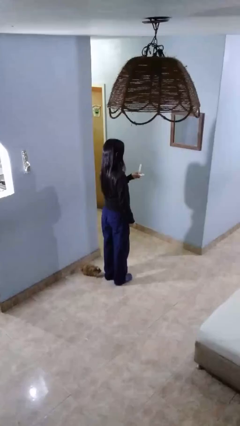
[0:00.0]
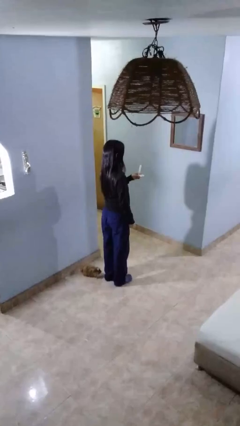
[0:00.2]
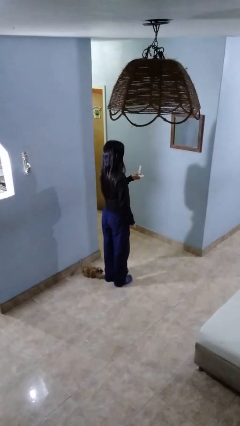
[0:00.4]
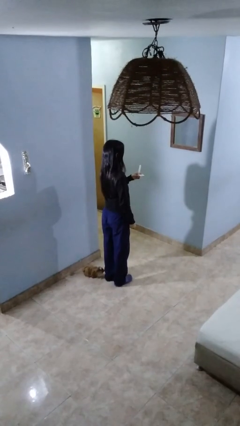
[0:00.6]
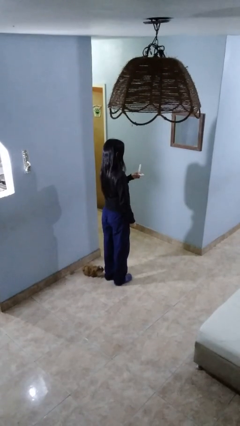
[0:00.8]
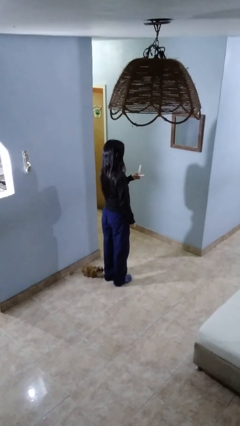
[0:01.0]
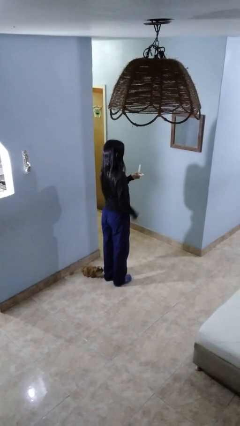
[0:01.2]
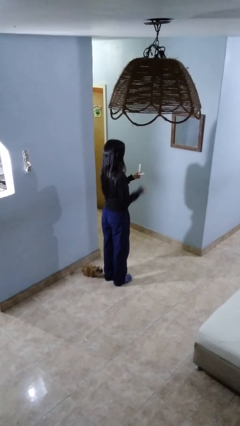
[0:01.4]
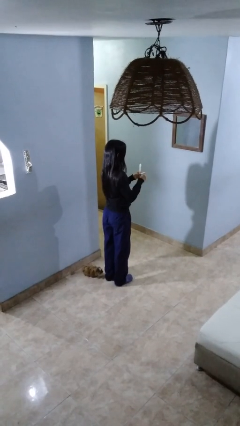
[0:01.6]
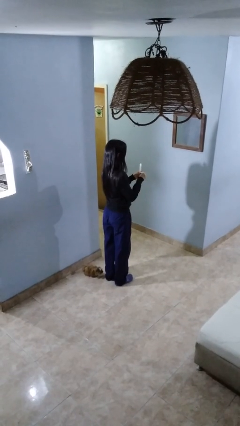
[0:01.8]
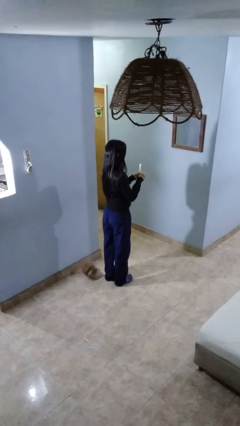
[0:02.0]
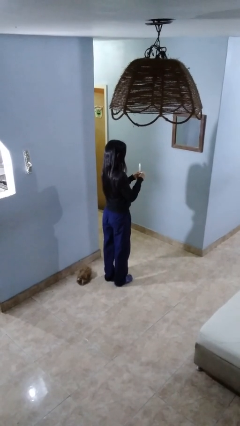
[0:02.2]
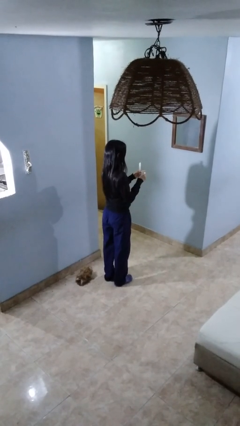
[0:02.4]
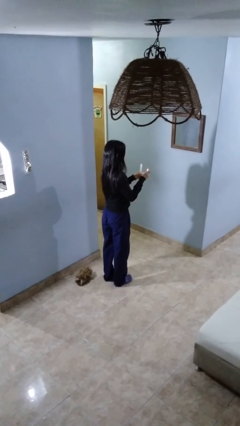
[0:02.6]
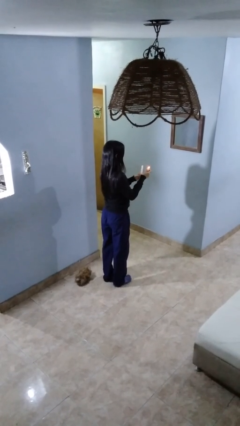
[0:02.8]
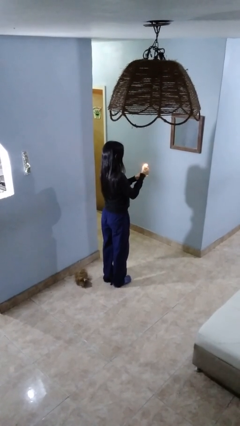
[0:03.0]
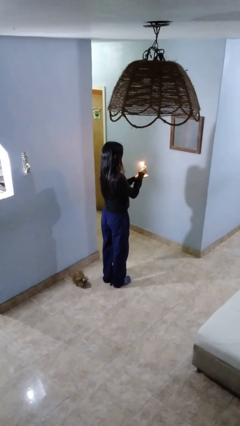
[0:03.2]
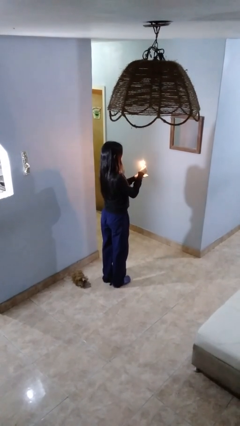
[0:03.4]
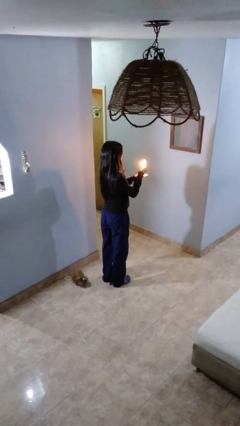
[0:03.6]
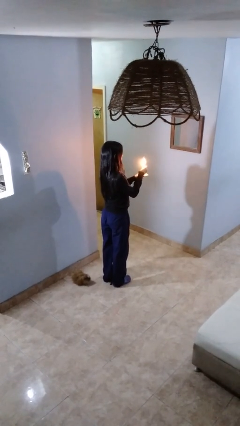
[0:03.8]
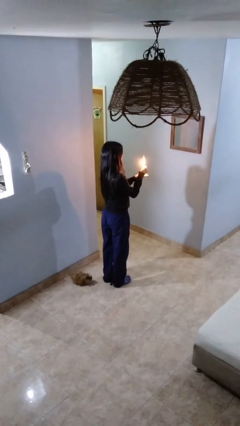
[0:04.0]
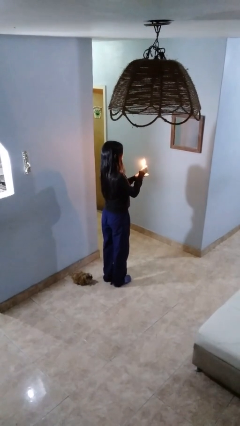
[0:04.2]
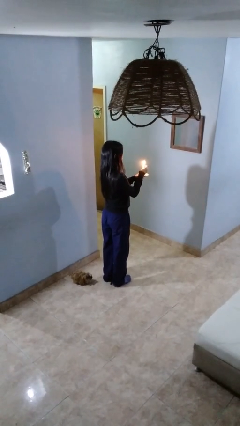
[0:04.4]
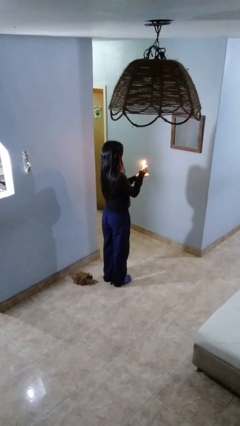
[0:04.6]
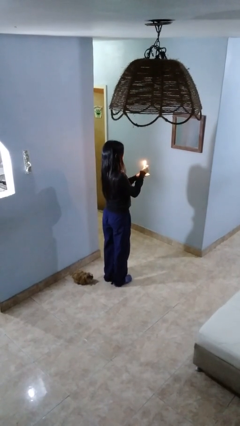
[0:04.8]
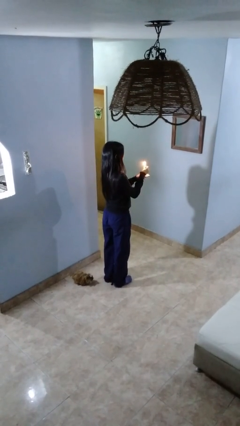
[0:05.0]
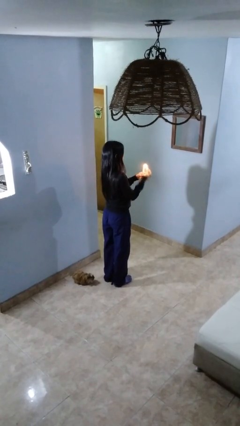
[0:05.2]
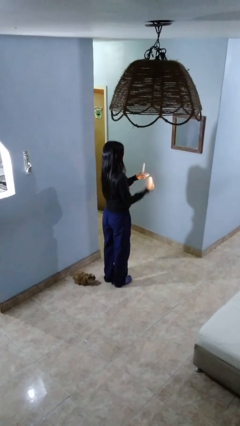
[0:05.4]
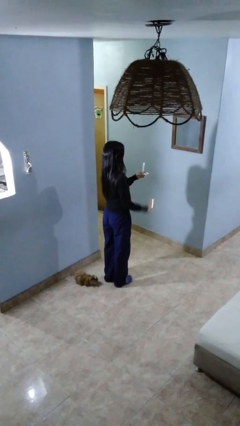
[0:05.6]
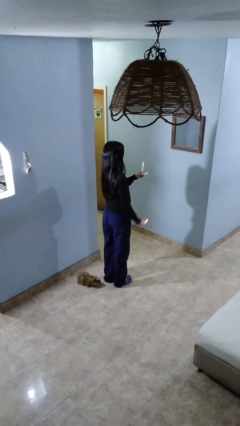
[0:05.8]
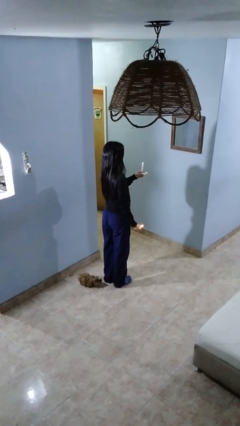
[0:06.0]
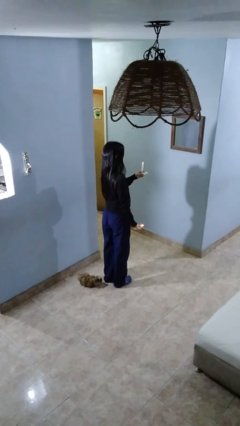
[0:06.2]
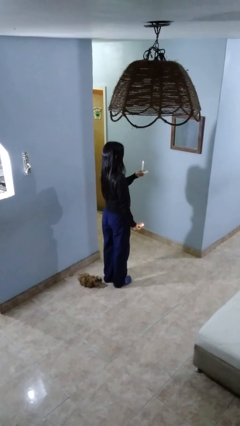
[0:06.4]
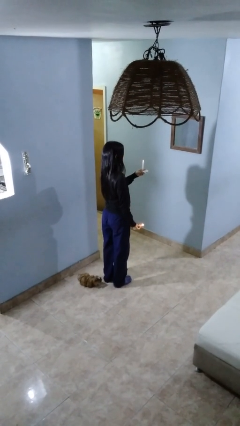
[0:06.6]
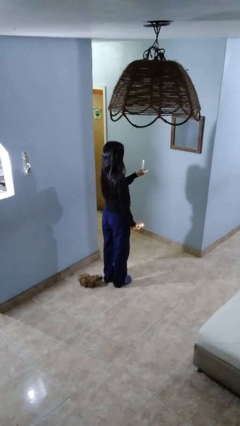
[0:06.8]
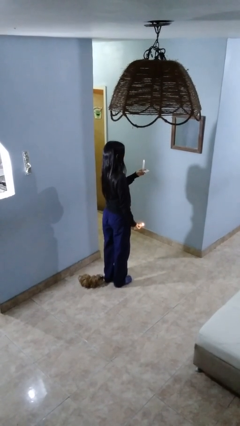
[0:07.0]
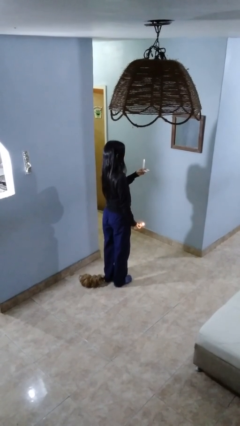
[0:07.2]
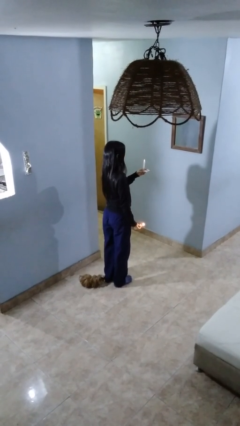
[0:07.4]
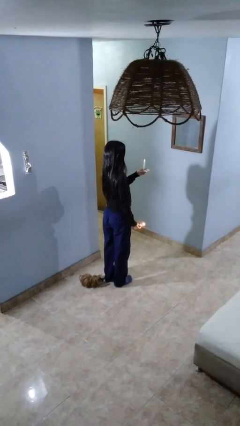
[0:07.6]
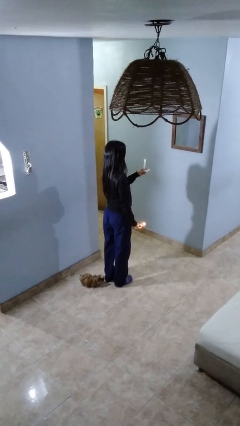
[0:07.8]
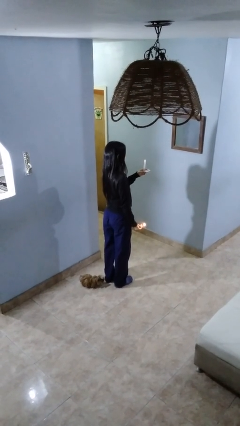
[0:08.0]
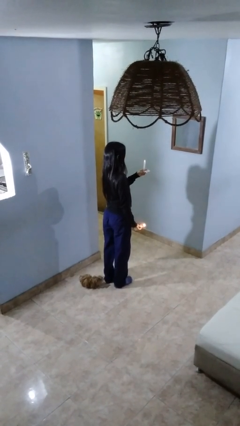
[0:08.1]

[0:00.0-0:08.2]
person lights candle

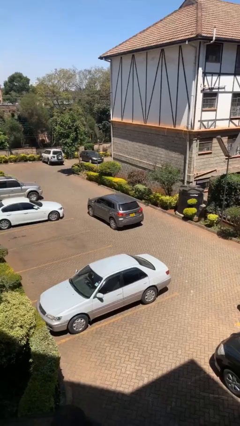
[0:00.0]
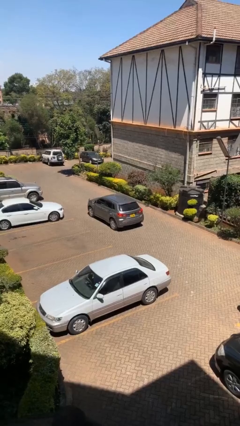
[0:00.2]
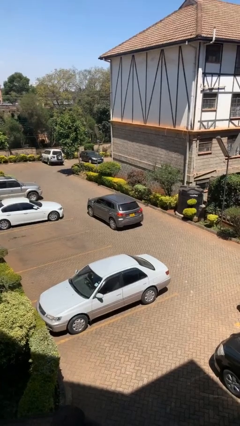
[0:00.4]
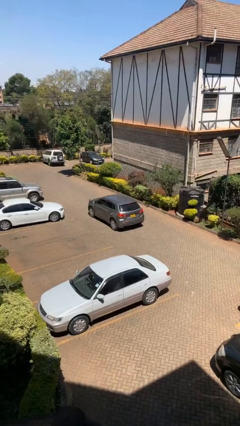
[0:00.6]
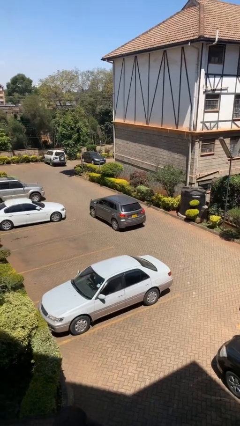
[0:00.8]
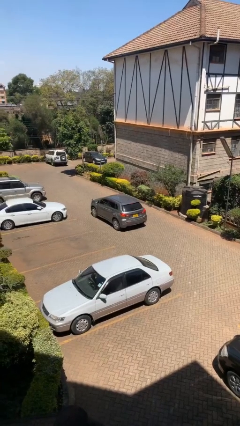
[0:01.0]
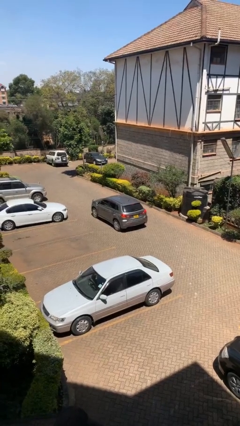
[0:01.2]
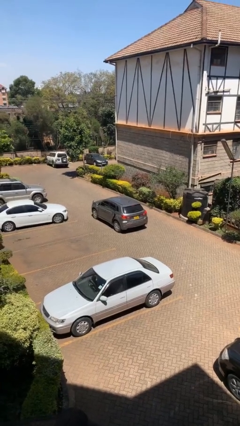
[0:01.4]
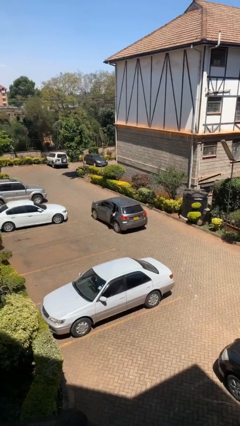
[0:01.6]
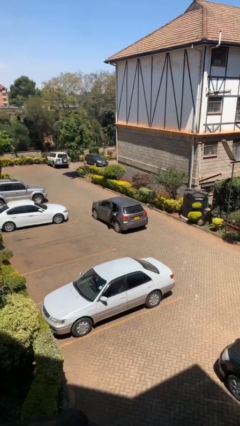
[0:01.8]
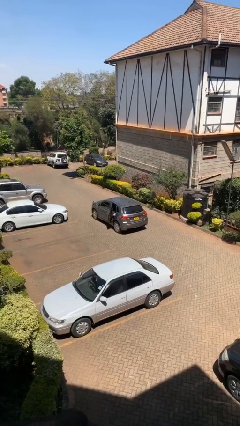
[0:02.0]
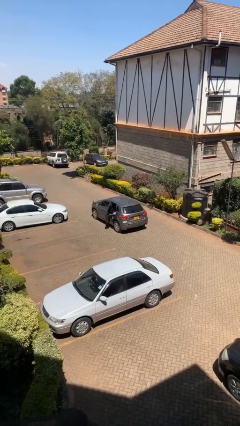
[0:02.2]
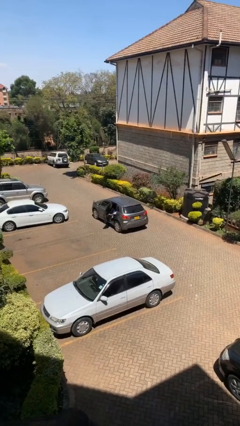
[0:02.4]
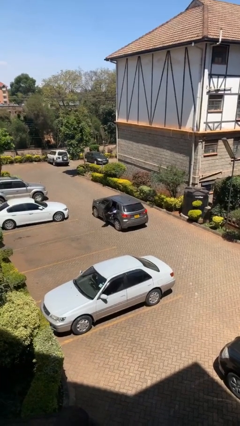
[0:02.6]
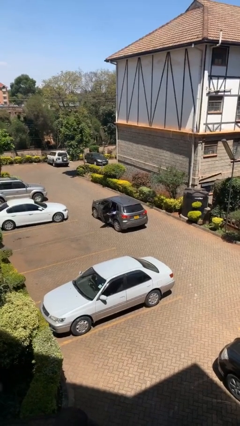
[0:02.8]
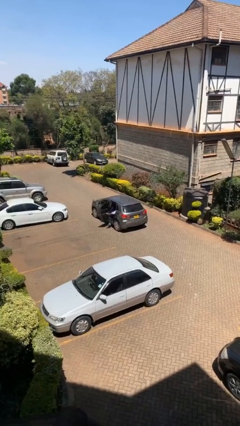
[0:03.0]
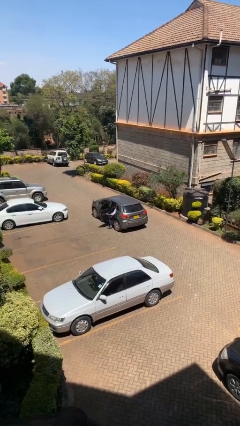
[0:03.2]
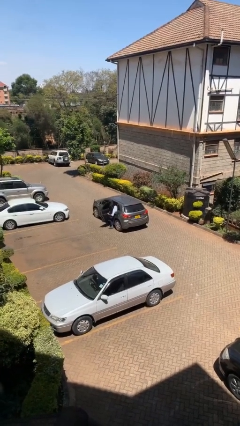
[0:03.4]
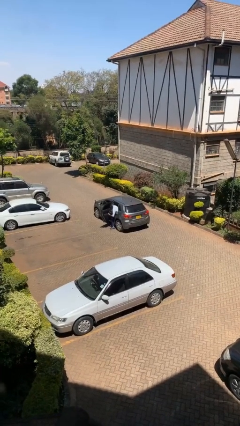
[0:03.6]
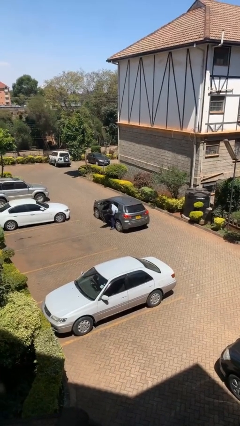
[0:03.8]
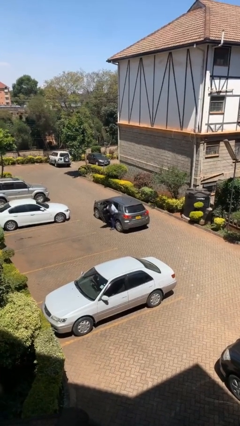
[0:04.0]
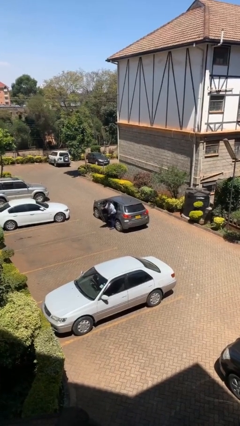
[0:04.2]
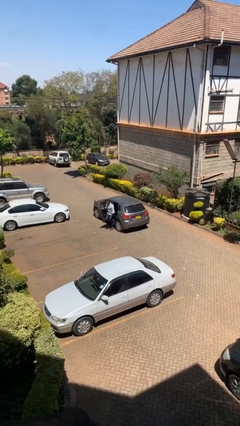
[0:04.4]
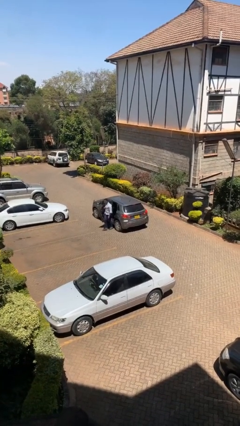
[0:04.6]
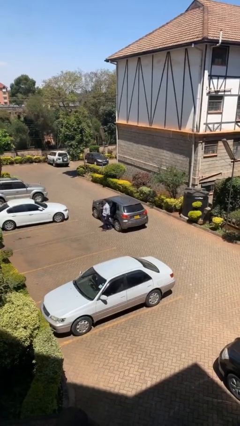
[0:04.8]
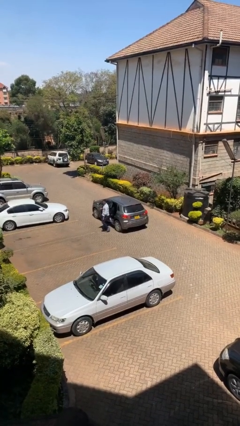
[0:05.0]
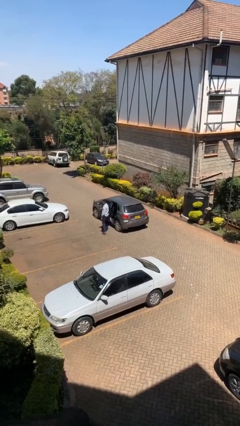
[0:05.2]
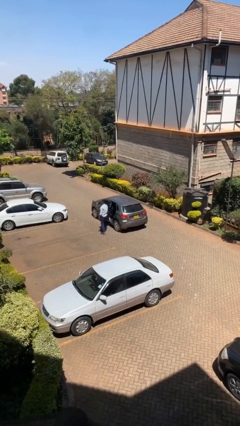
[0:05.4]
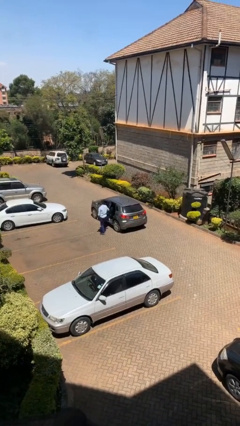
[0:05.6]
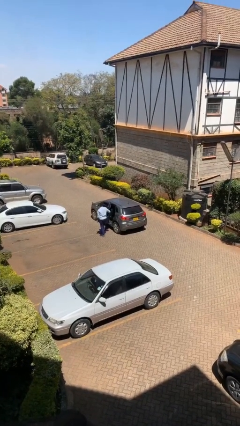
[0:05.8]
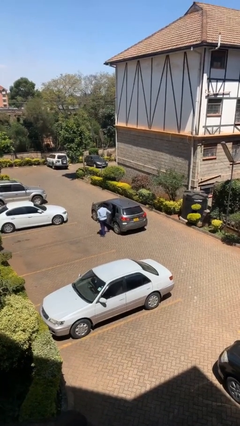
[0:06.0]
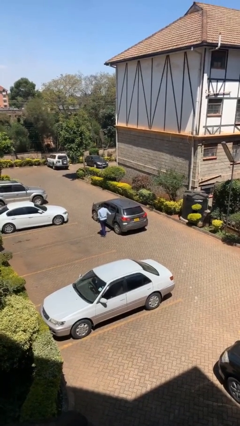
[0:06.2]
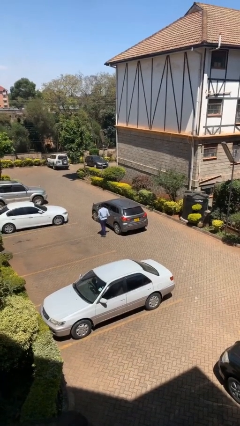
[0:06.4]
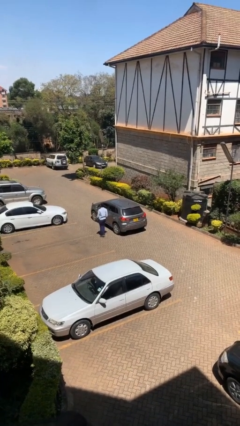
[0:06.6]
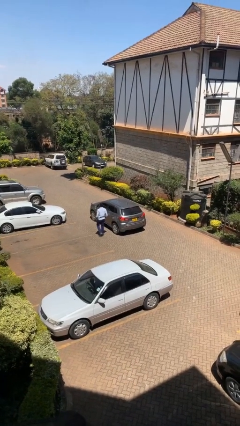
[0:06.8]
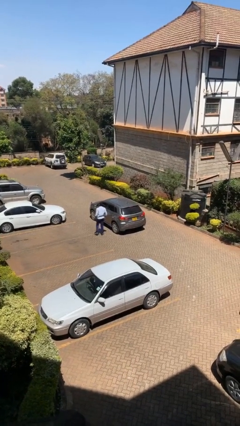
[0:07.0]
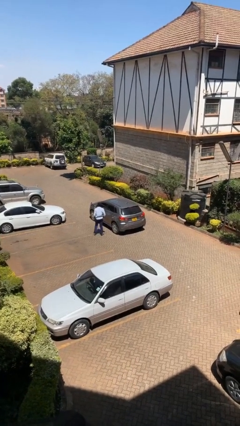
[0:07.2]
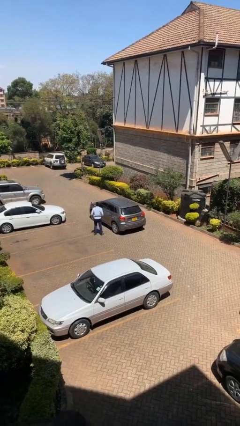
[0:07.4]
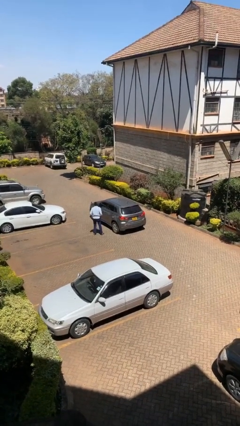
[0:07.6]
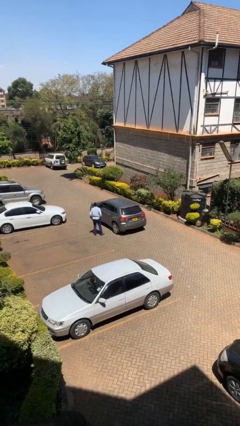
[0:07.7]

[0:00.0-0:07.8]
car drops off person

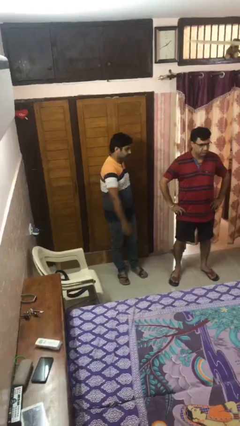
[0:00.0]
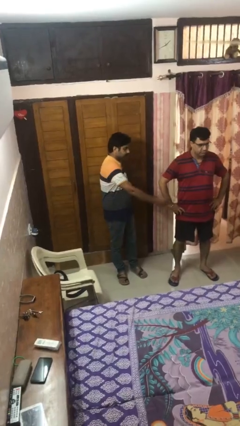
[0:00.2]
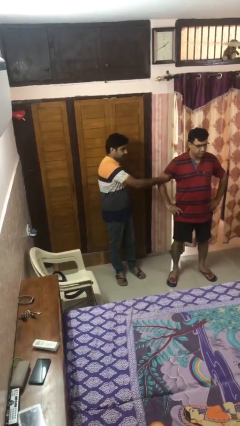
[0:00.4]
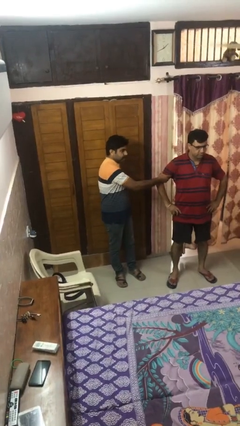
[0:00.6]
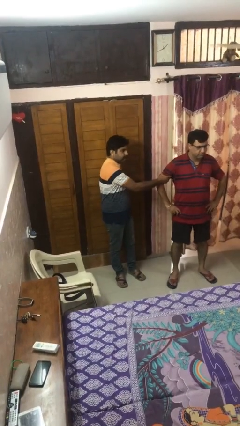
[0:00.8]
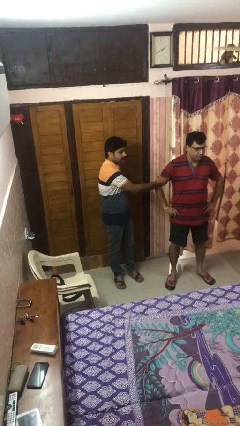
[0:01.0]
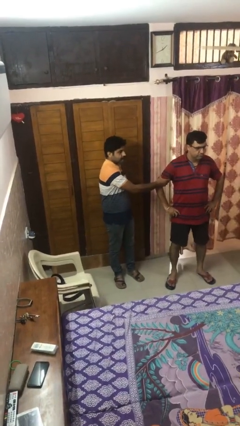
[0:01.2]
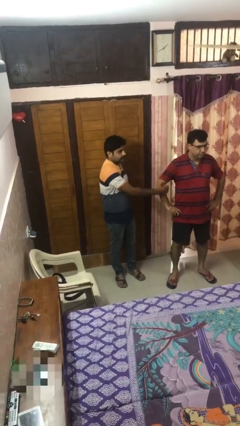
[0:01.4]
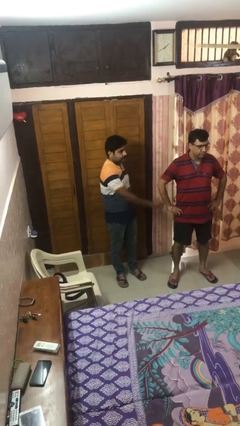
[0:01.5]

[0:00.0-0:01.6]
person grabs person by bicep

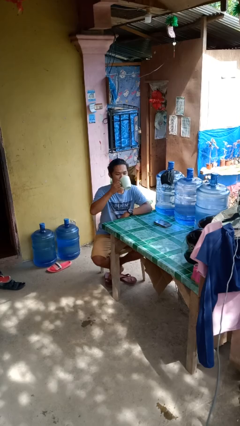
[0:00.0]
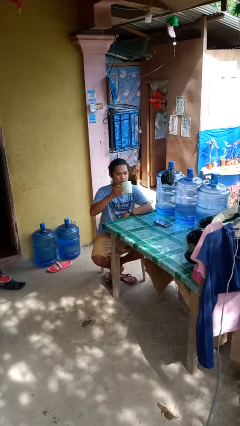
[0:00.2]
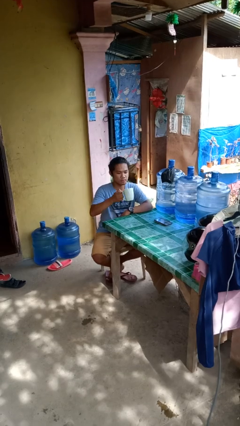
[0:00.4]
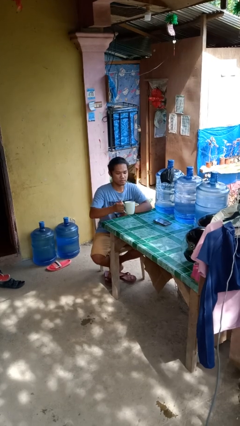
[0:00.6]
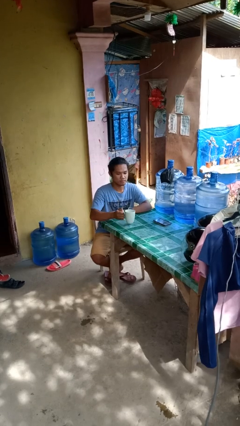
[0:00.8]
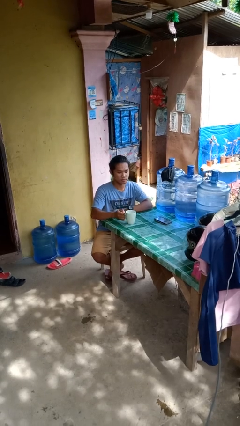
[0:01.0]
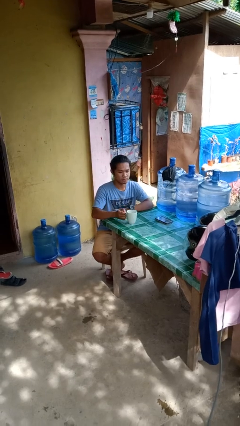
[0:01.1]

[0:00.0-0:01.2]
person puts down object on table
